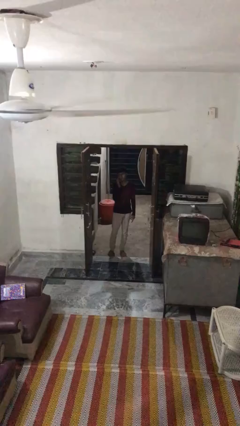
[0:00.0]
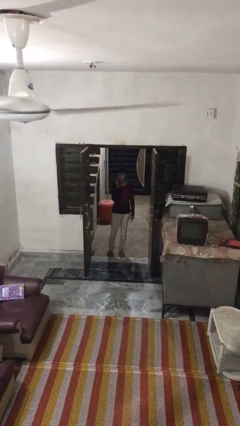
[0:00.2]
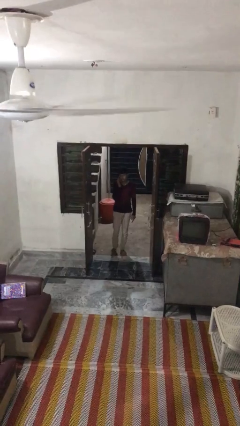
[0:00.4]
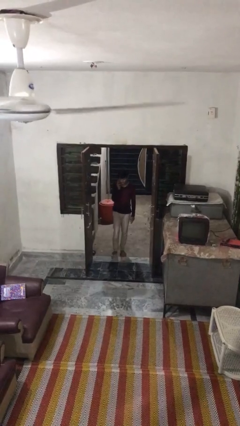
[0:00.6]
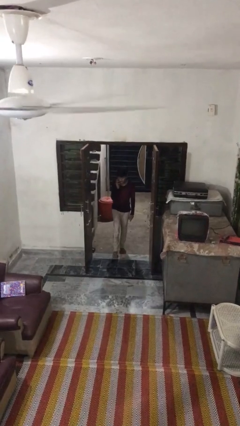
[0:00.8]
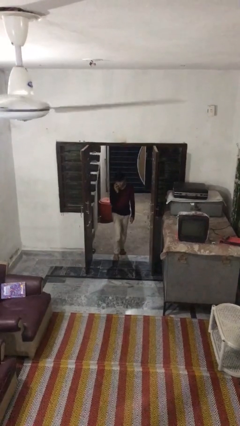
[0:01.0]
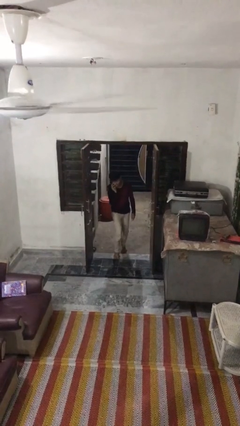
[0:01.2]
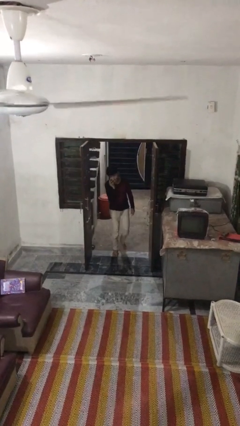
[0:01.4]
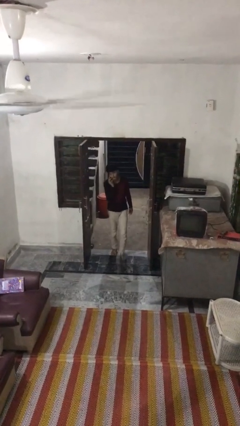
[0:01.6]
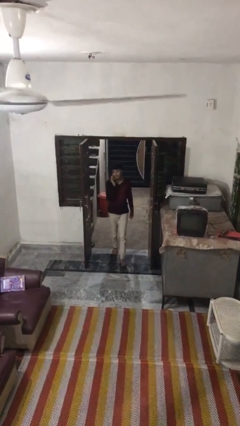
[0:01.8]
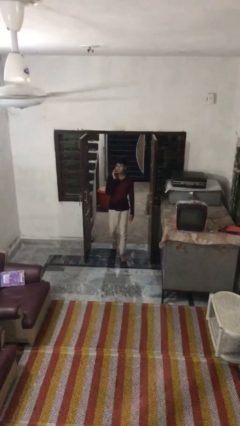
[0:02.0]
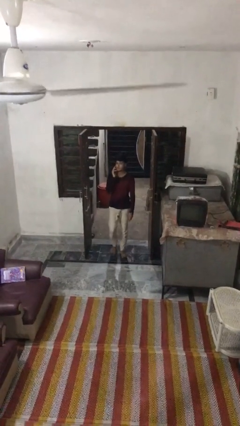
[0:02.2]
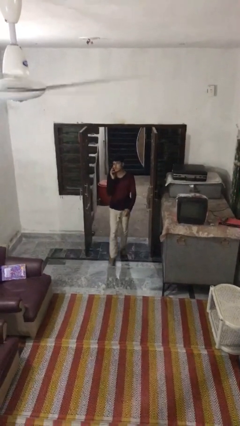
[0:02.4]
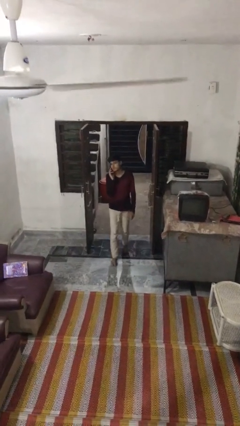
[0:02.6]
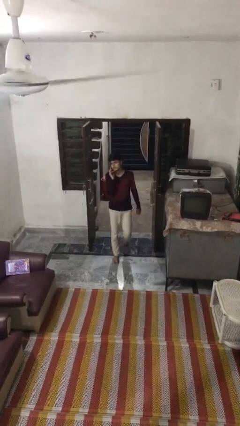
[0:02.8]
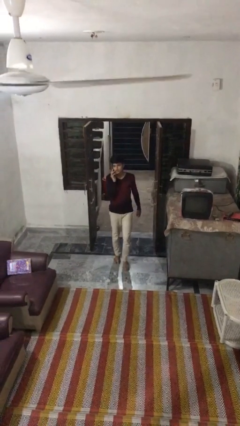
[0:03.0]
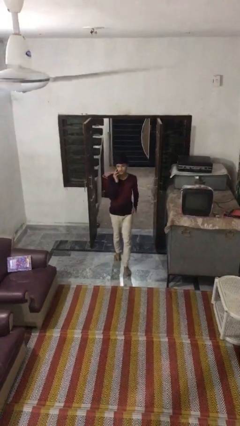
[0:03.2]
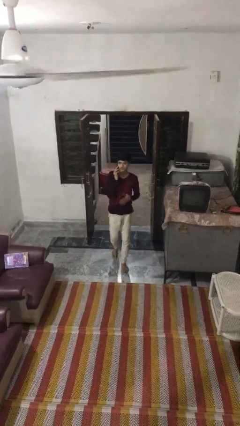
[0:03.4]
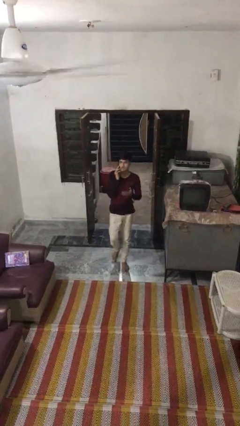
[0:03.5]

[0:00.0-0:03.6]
person enters scene through structure

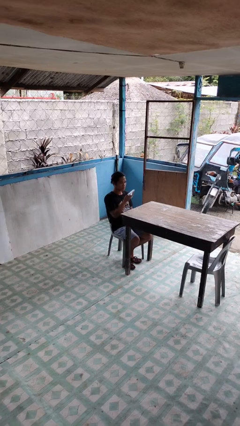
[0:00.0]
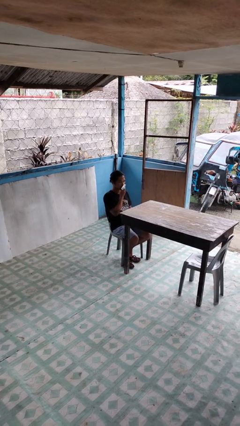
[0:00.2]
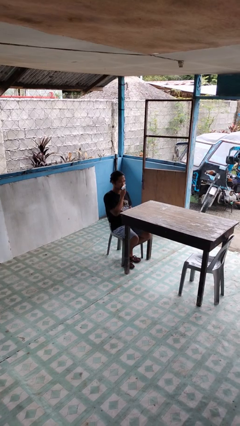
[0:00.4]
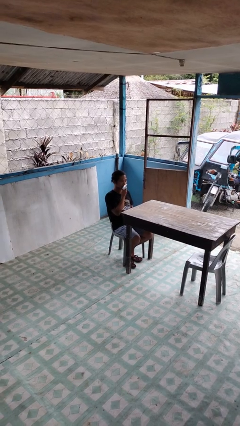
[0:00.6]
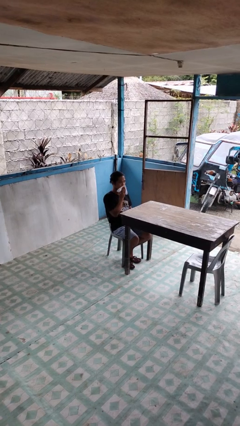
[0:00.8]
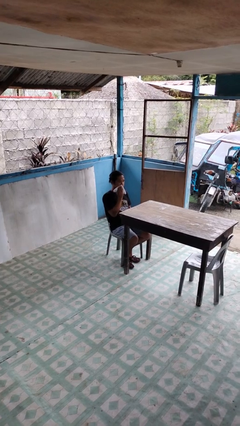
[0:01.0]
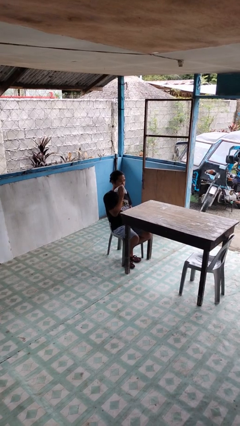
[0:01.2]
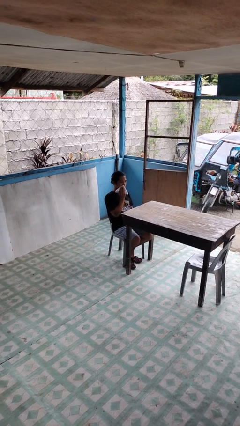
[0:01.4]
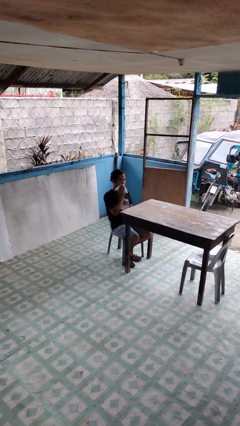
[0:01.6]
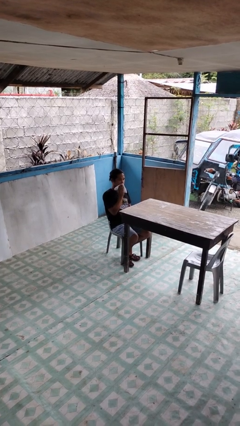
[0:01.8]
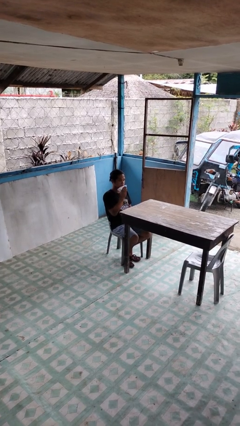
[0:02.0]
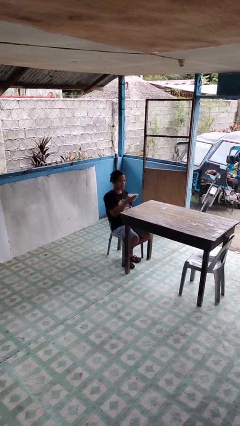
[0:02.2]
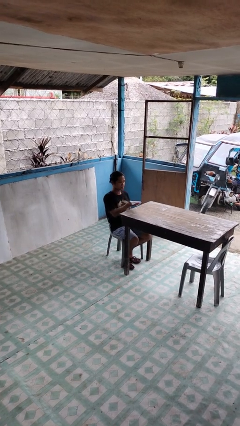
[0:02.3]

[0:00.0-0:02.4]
person wipes mouth with napkin

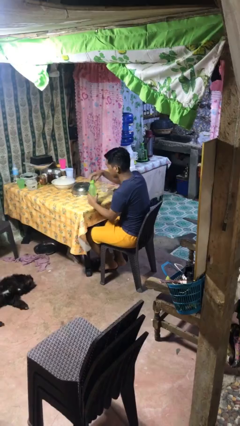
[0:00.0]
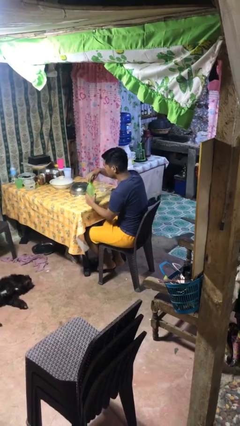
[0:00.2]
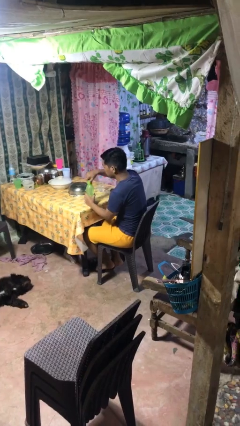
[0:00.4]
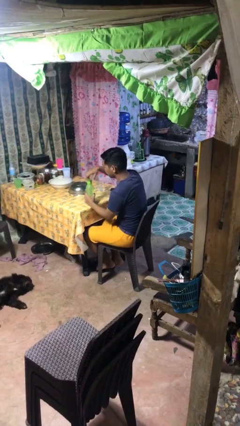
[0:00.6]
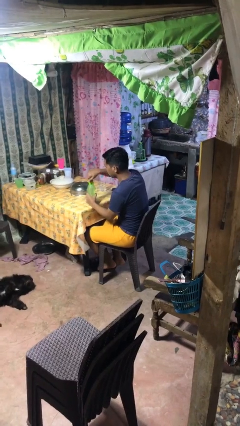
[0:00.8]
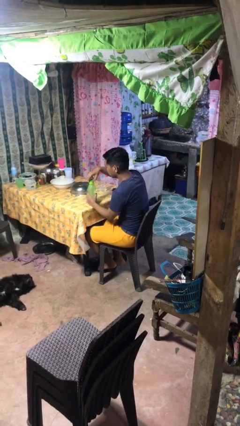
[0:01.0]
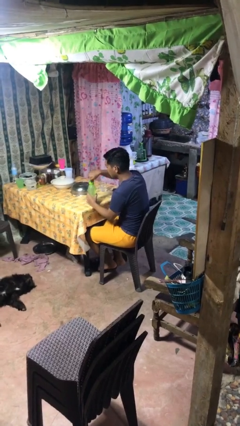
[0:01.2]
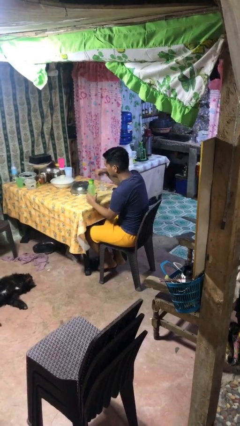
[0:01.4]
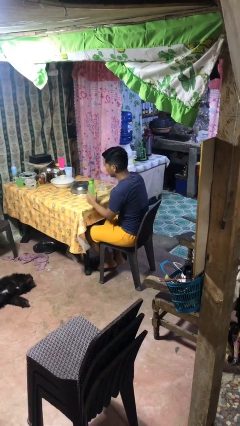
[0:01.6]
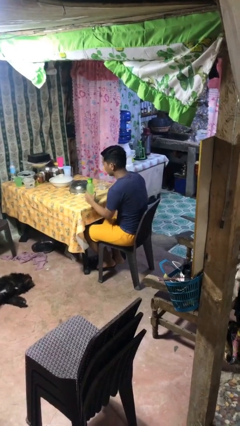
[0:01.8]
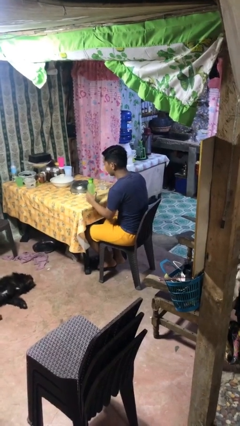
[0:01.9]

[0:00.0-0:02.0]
person screws lid to bottle

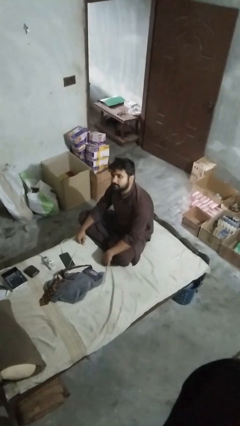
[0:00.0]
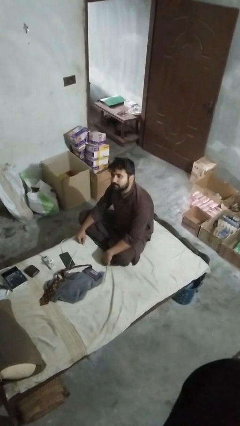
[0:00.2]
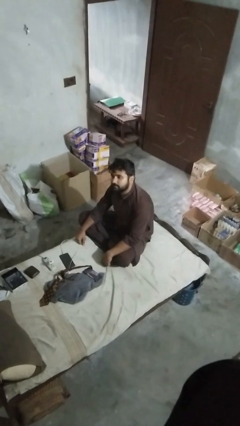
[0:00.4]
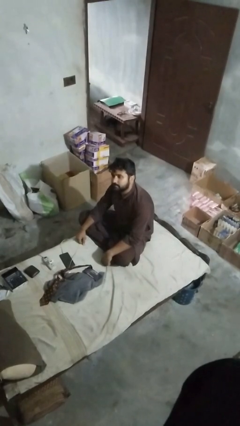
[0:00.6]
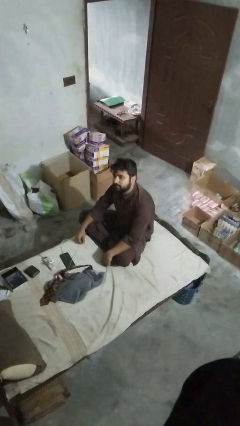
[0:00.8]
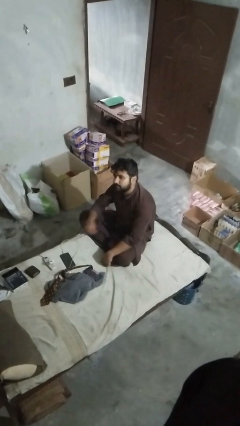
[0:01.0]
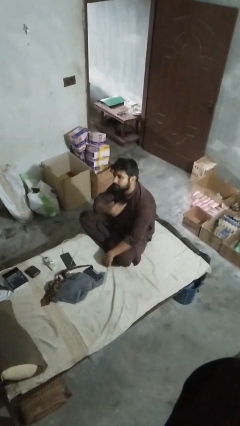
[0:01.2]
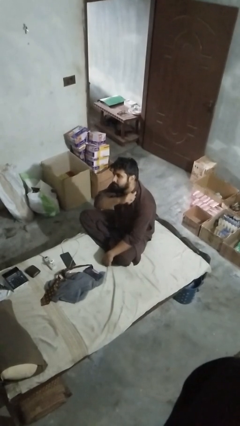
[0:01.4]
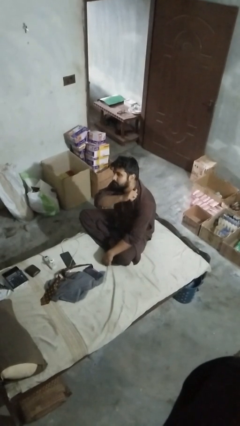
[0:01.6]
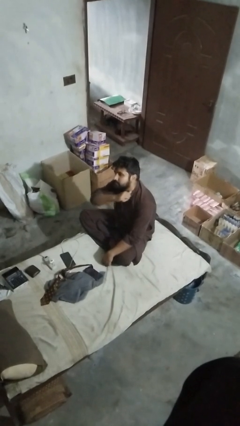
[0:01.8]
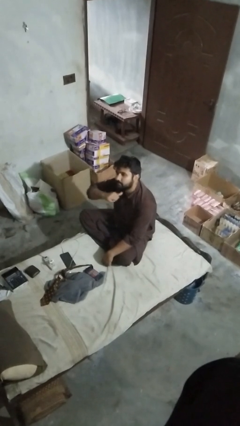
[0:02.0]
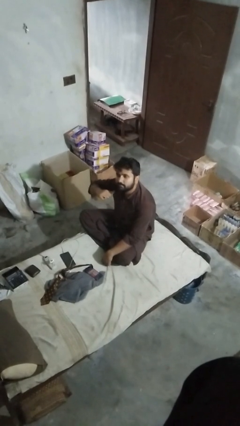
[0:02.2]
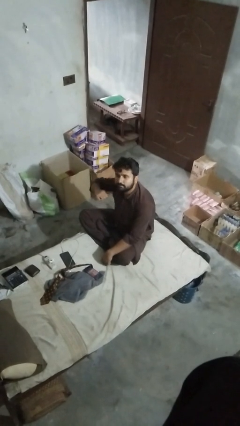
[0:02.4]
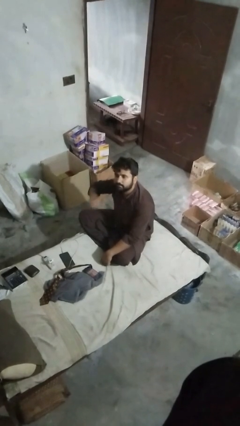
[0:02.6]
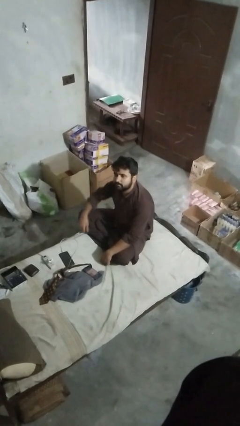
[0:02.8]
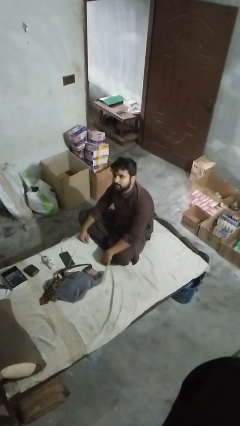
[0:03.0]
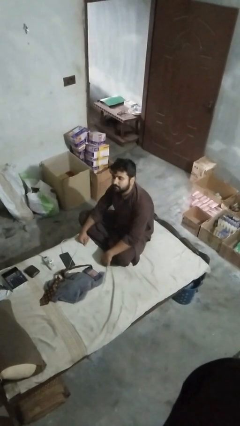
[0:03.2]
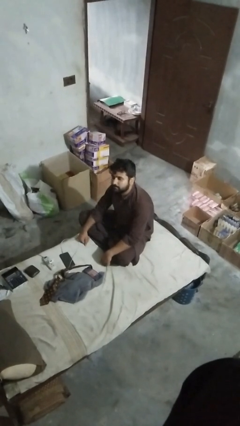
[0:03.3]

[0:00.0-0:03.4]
person gestures cut

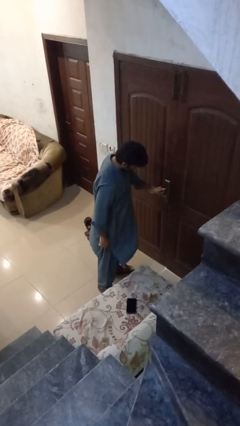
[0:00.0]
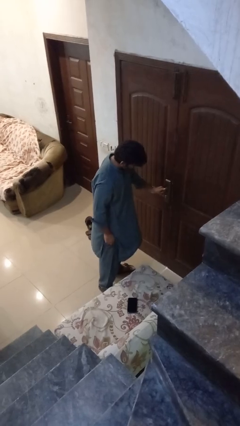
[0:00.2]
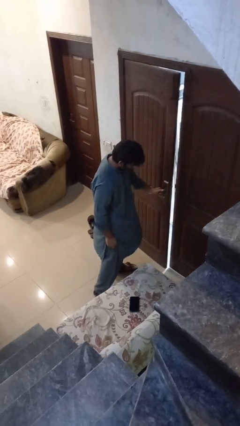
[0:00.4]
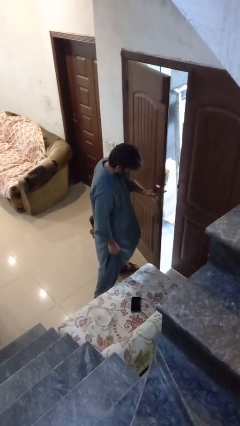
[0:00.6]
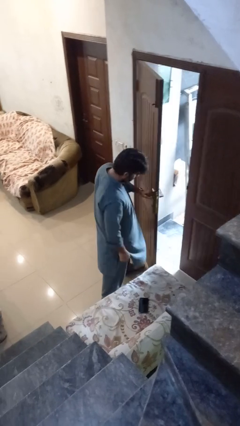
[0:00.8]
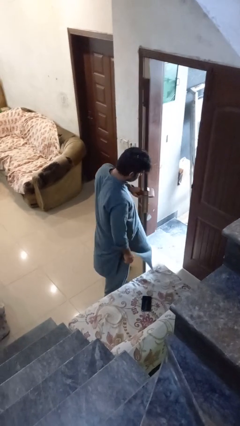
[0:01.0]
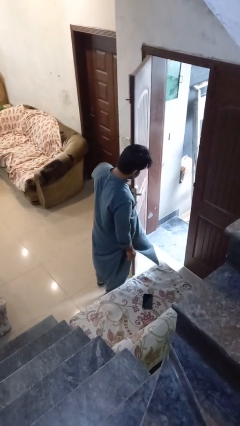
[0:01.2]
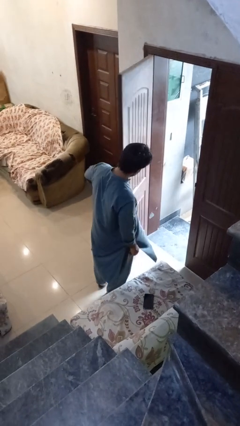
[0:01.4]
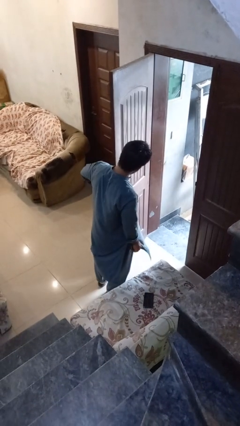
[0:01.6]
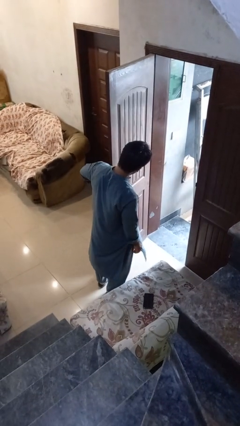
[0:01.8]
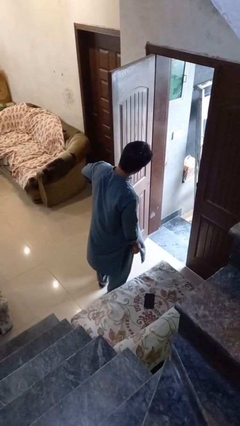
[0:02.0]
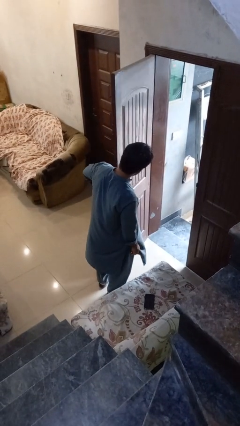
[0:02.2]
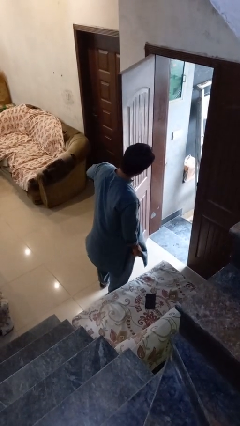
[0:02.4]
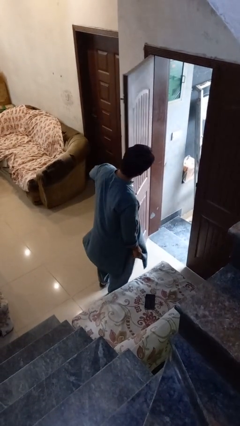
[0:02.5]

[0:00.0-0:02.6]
person opens facility door

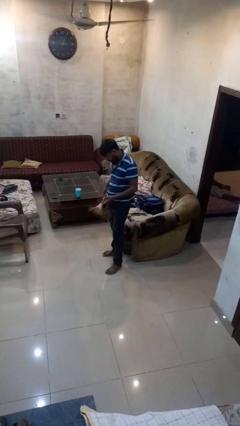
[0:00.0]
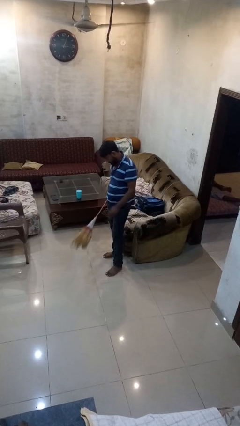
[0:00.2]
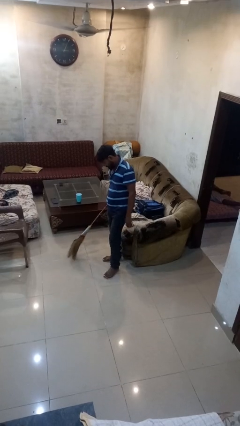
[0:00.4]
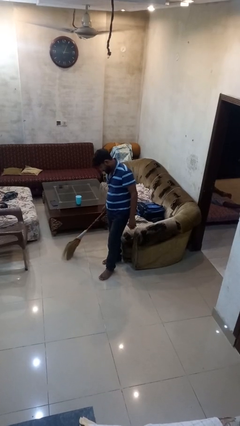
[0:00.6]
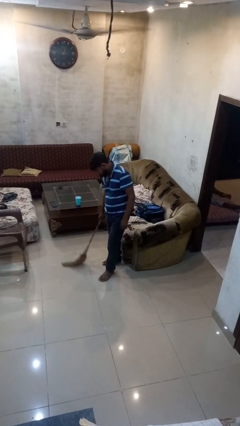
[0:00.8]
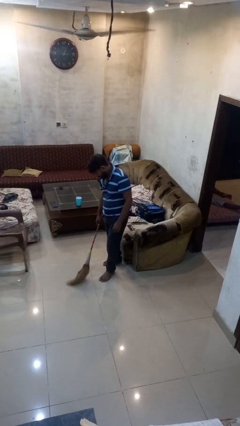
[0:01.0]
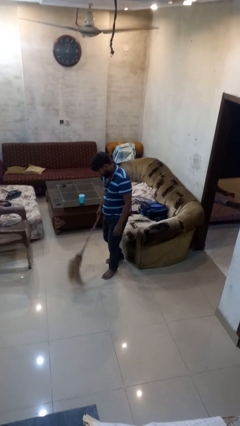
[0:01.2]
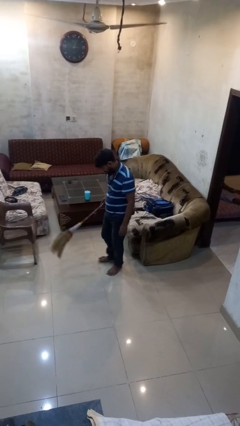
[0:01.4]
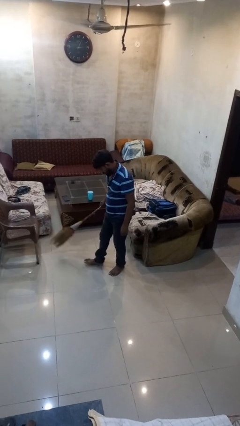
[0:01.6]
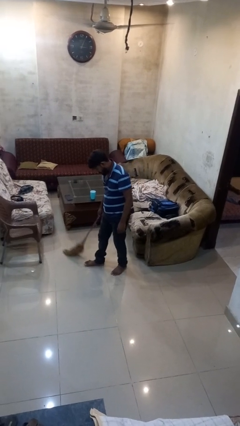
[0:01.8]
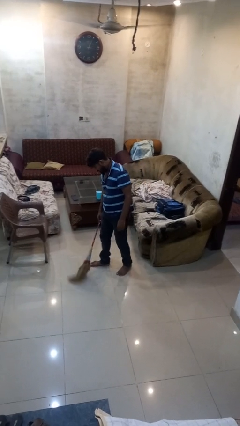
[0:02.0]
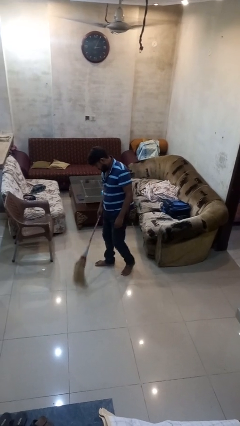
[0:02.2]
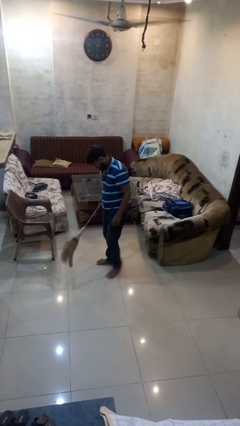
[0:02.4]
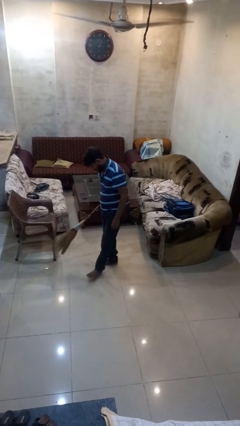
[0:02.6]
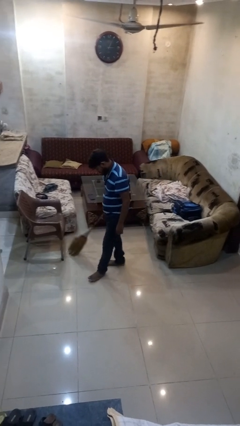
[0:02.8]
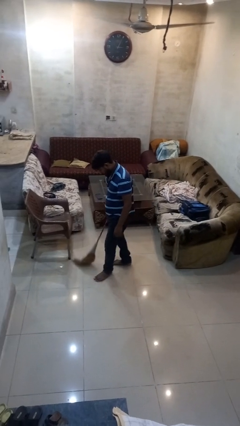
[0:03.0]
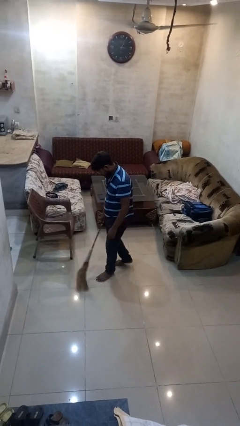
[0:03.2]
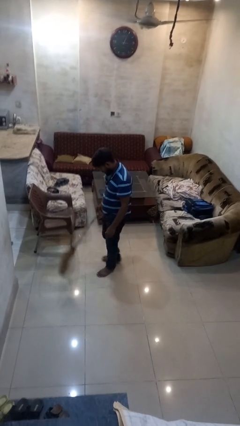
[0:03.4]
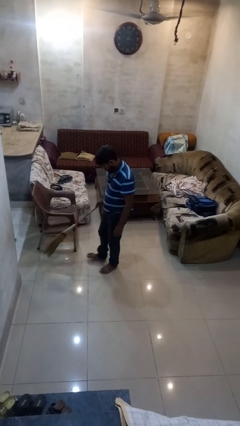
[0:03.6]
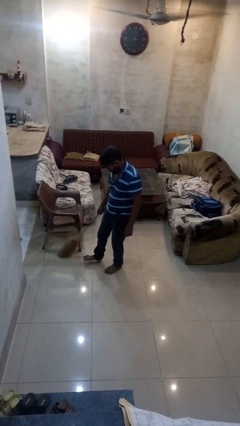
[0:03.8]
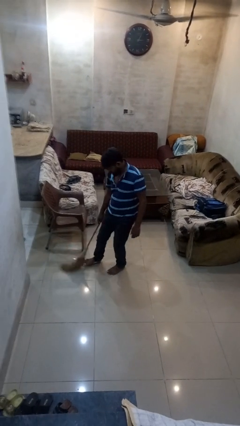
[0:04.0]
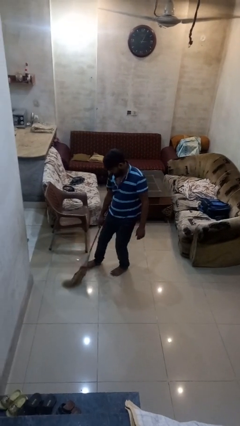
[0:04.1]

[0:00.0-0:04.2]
person sweeps floor
